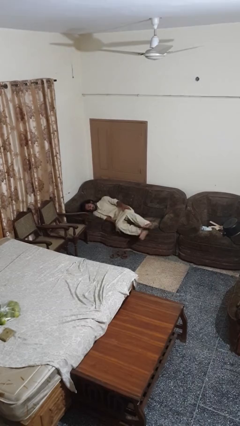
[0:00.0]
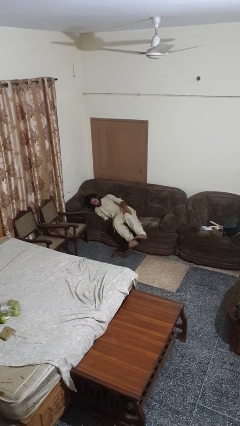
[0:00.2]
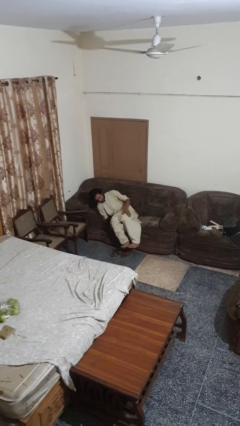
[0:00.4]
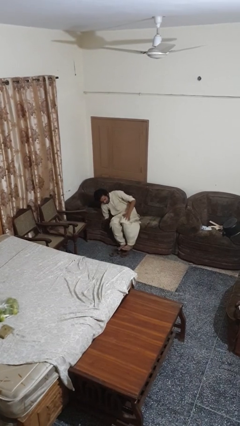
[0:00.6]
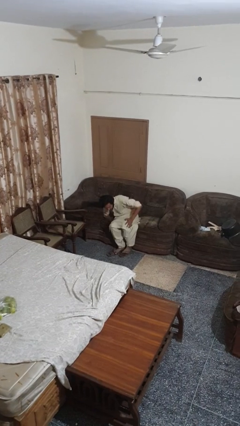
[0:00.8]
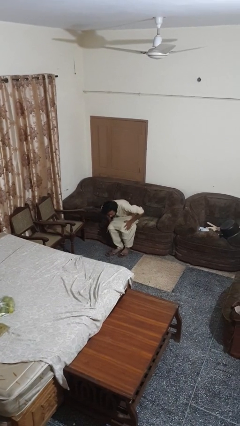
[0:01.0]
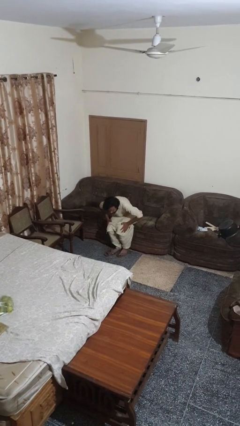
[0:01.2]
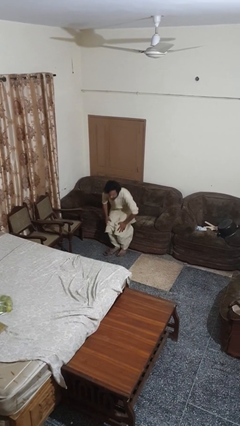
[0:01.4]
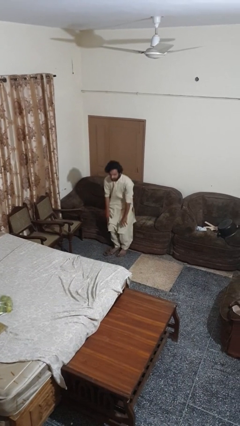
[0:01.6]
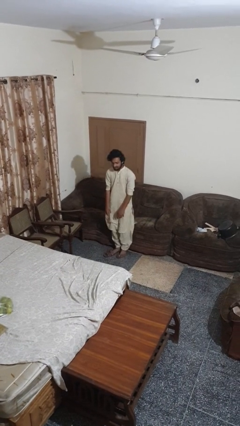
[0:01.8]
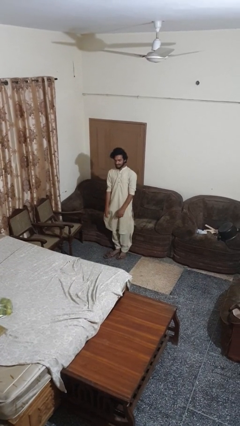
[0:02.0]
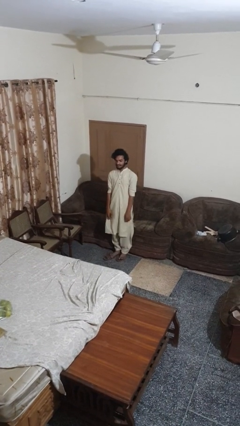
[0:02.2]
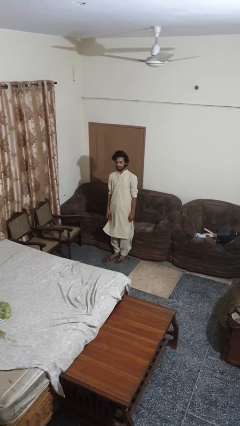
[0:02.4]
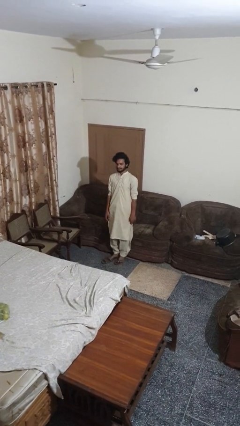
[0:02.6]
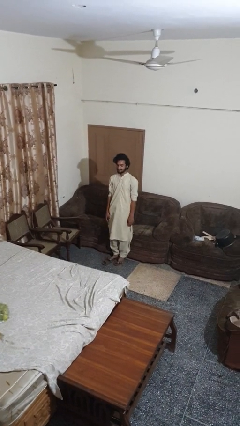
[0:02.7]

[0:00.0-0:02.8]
person stands up

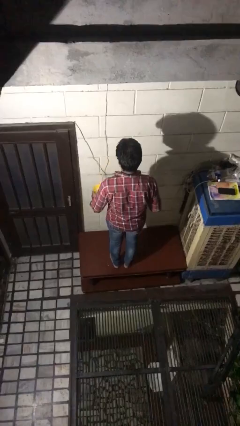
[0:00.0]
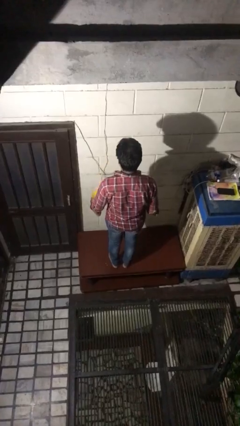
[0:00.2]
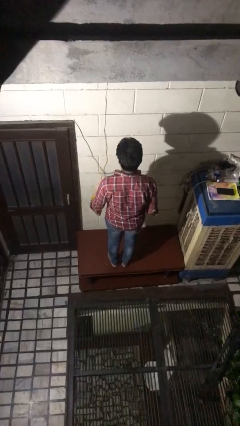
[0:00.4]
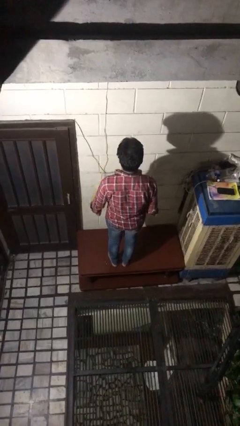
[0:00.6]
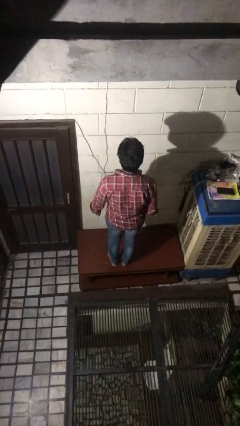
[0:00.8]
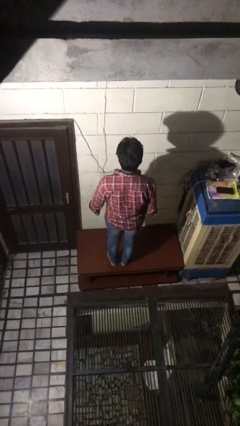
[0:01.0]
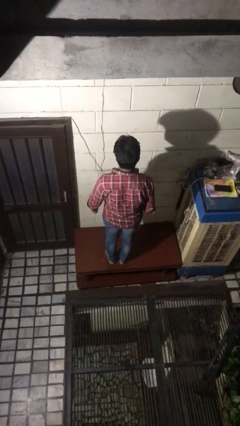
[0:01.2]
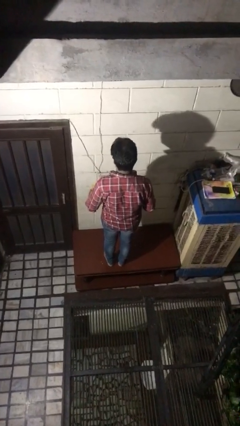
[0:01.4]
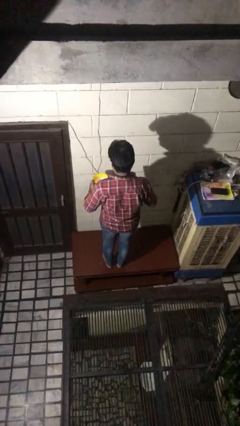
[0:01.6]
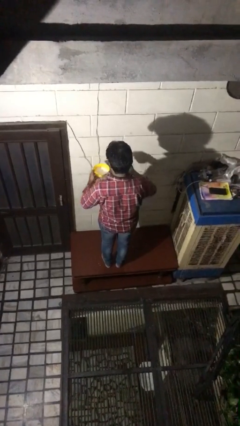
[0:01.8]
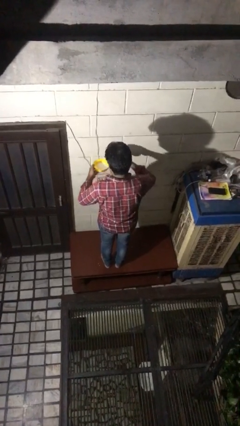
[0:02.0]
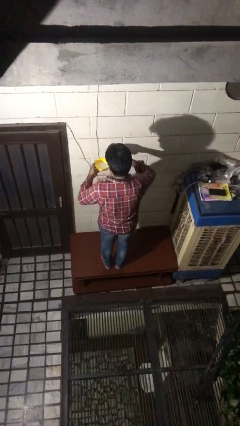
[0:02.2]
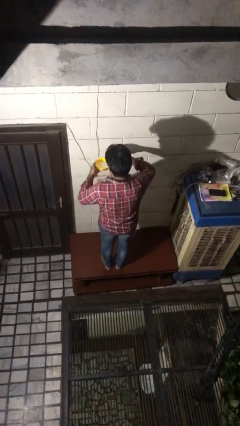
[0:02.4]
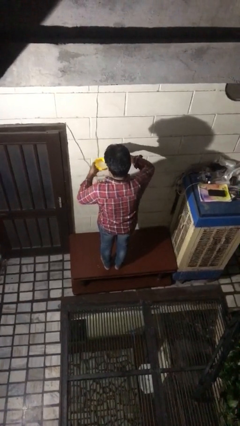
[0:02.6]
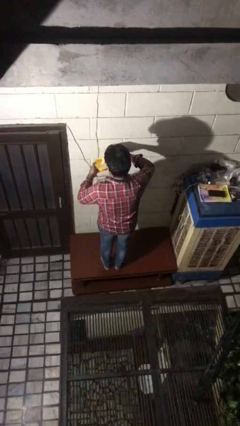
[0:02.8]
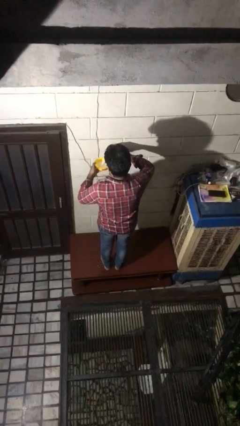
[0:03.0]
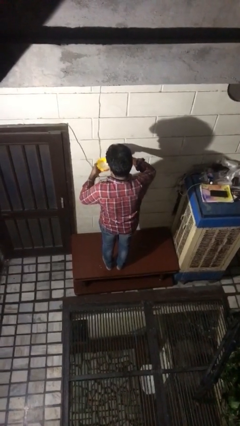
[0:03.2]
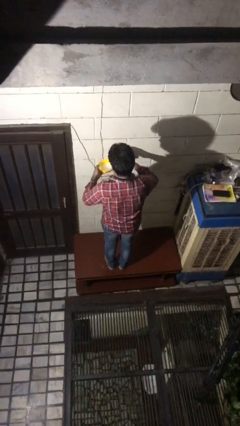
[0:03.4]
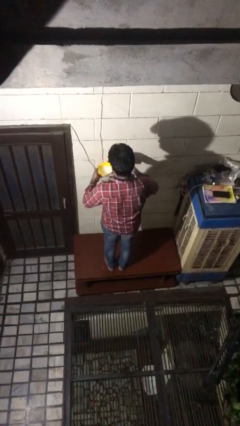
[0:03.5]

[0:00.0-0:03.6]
person pours into bowl

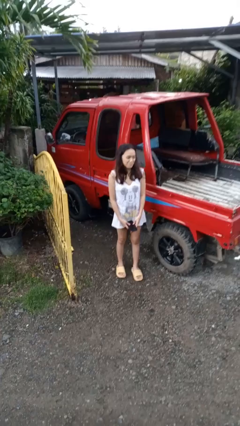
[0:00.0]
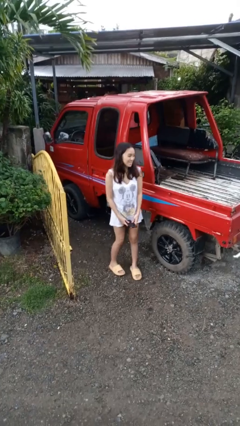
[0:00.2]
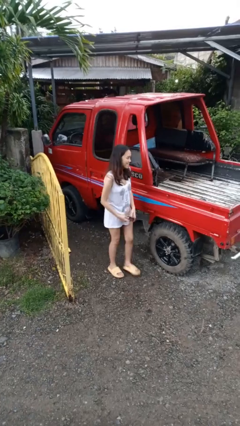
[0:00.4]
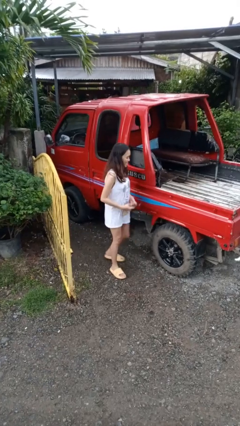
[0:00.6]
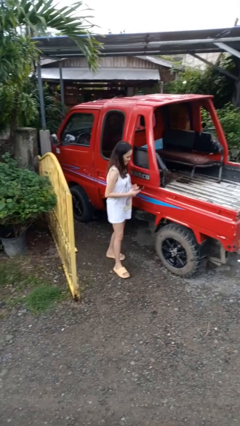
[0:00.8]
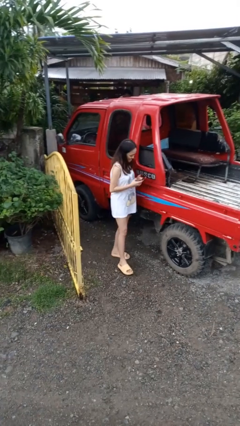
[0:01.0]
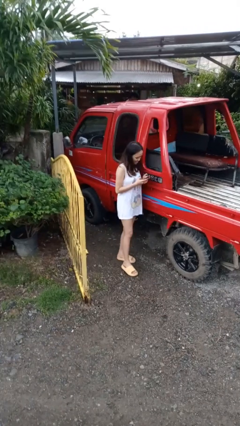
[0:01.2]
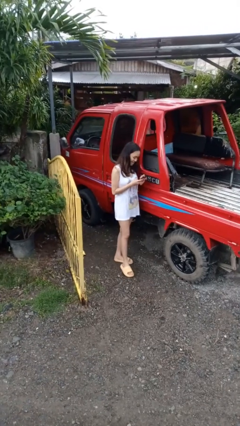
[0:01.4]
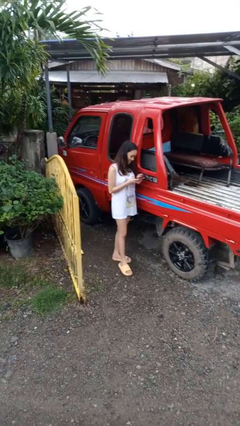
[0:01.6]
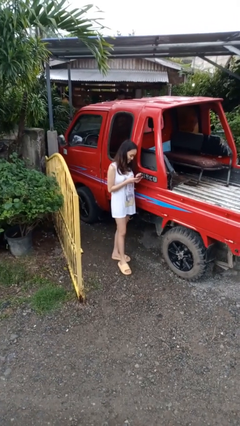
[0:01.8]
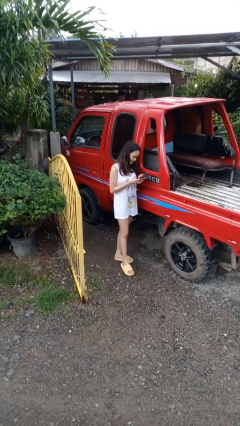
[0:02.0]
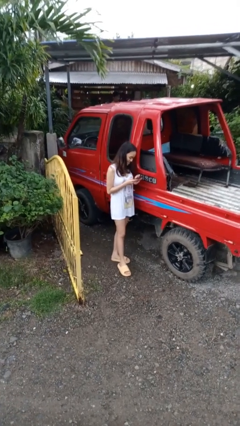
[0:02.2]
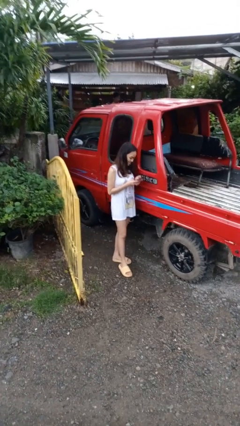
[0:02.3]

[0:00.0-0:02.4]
person leans against car

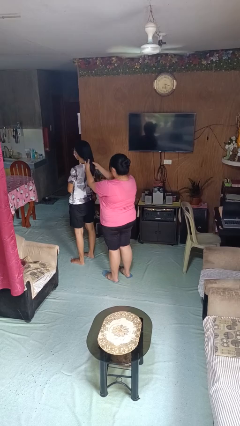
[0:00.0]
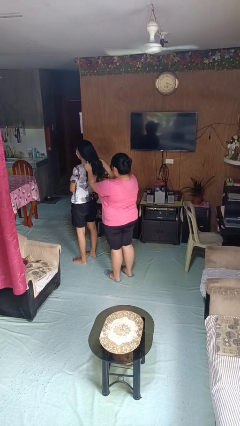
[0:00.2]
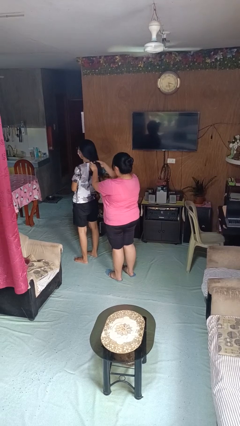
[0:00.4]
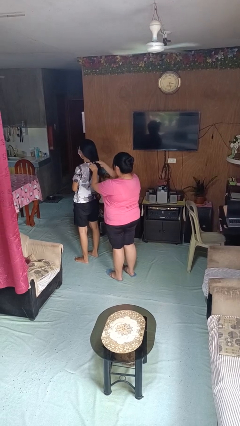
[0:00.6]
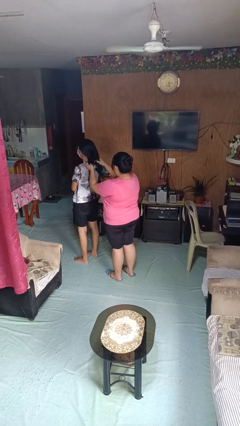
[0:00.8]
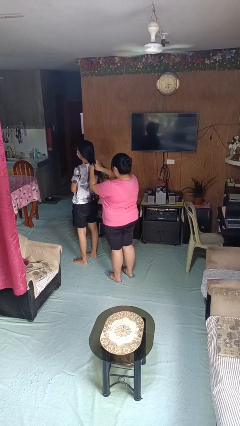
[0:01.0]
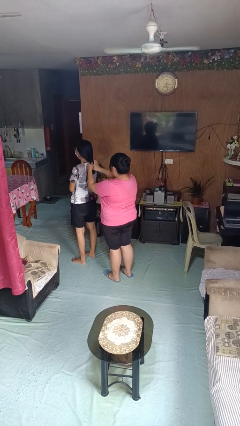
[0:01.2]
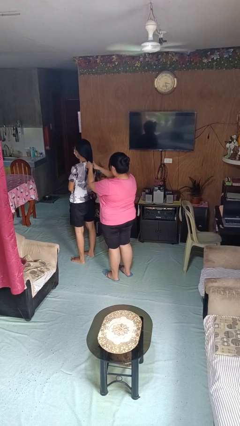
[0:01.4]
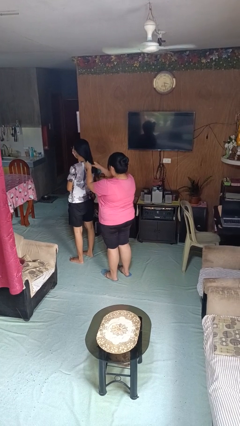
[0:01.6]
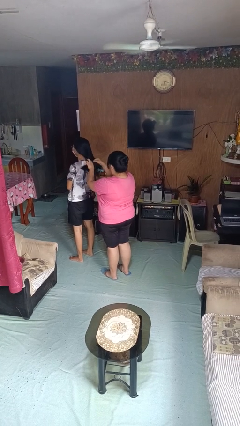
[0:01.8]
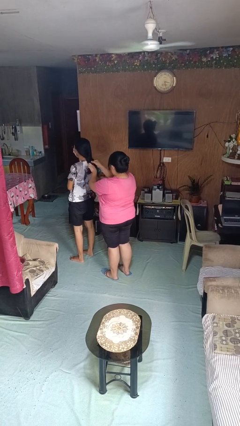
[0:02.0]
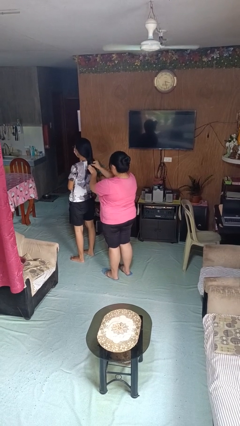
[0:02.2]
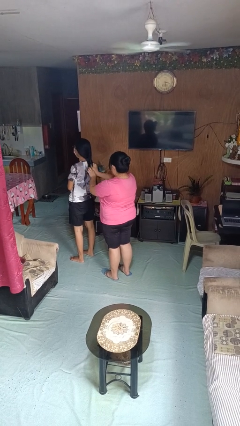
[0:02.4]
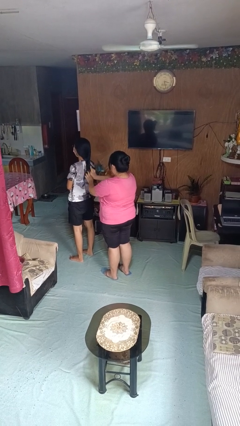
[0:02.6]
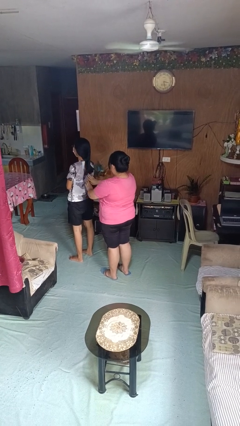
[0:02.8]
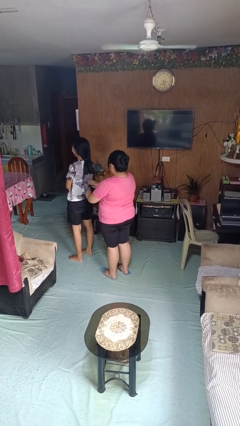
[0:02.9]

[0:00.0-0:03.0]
person braids hair of person

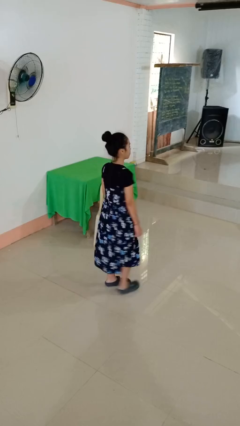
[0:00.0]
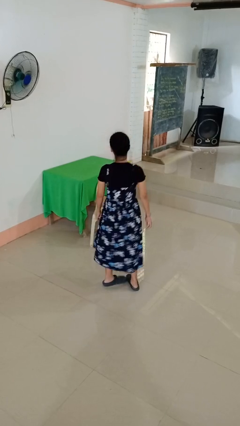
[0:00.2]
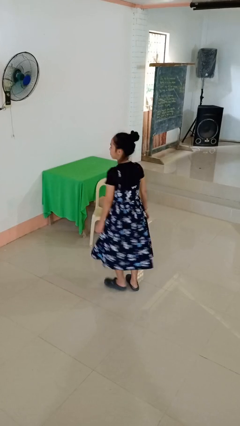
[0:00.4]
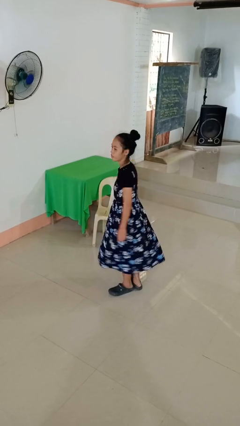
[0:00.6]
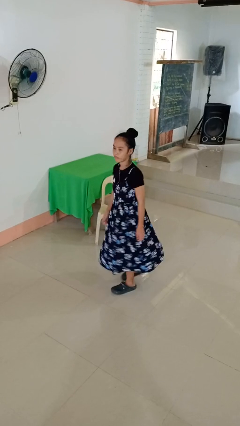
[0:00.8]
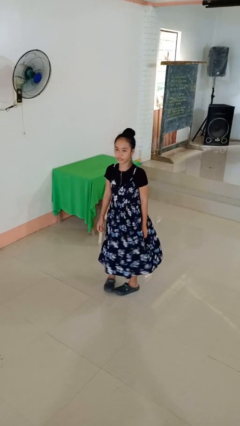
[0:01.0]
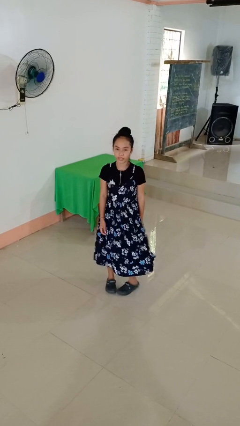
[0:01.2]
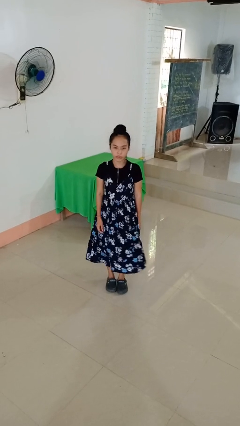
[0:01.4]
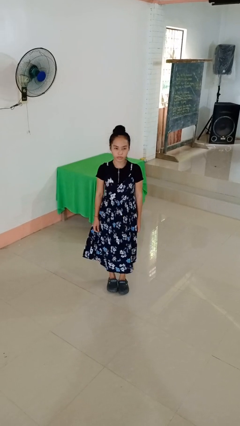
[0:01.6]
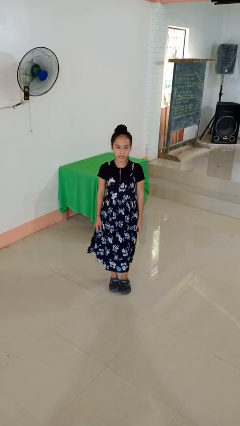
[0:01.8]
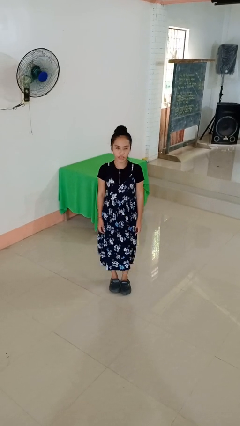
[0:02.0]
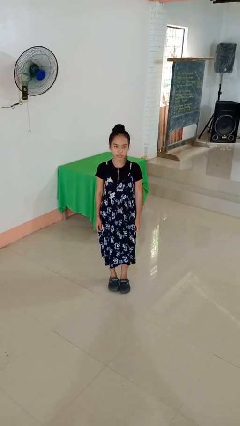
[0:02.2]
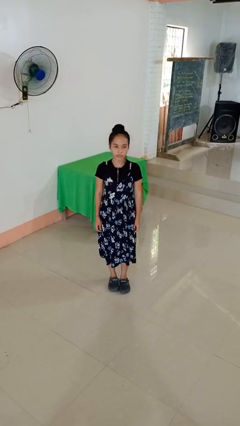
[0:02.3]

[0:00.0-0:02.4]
person twirls

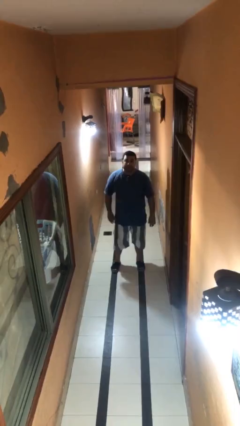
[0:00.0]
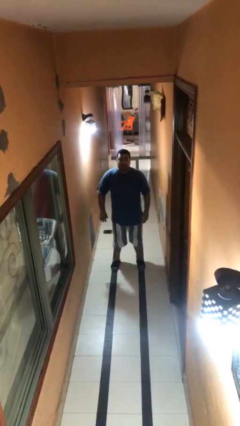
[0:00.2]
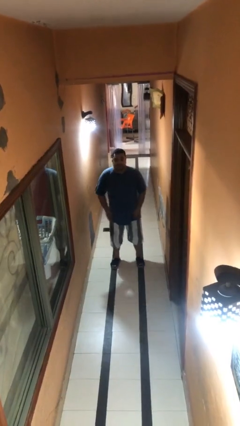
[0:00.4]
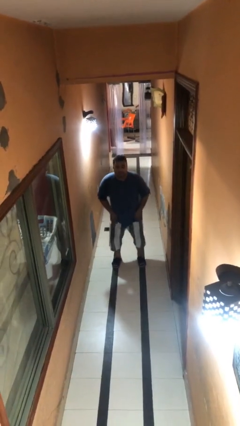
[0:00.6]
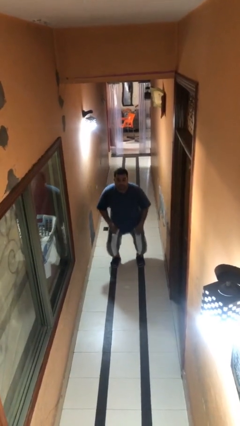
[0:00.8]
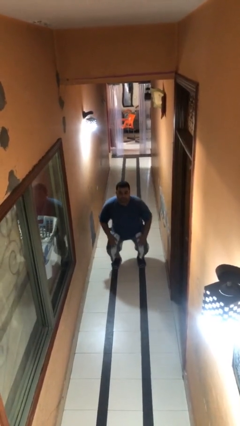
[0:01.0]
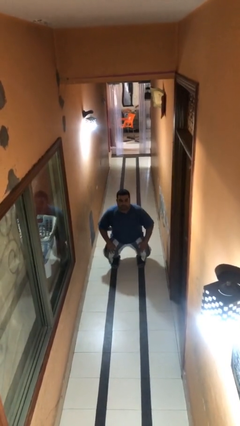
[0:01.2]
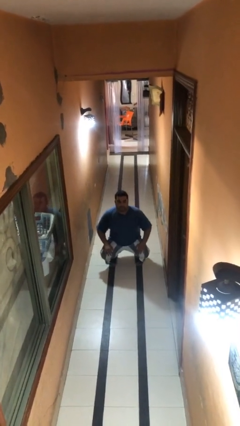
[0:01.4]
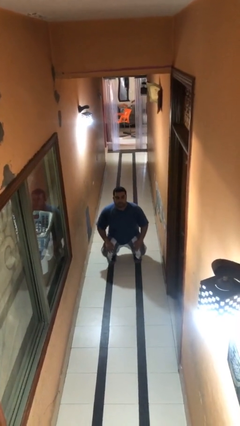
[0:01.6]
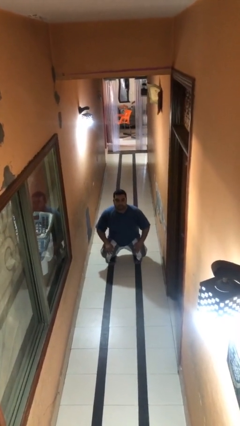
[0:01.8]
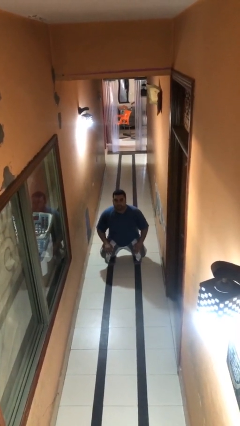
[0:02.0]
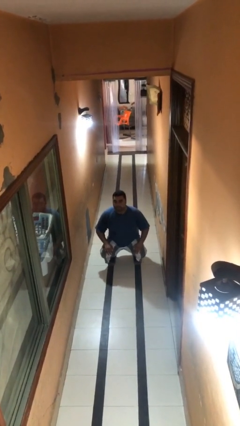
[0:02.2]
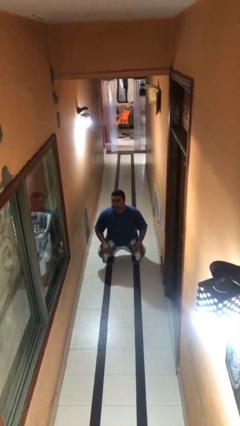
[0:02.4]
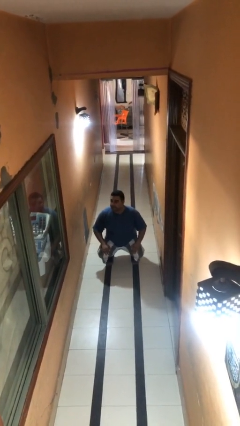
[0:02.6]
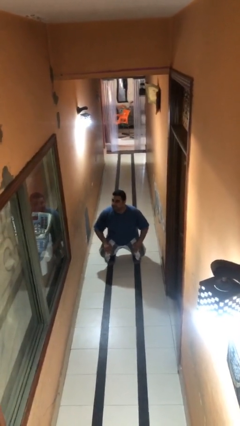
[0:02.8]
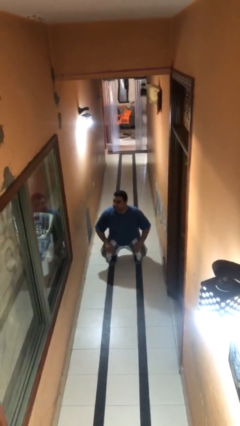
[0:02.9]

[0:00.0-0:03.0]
person squats

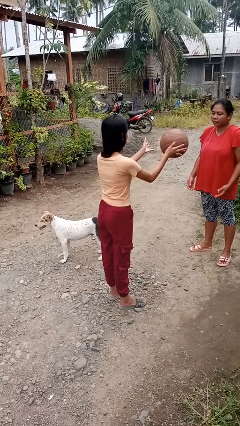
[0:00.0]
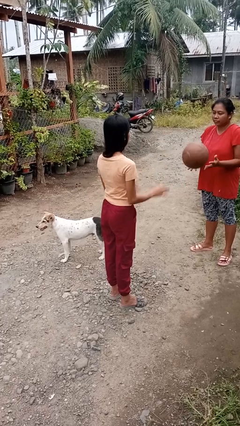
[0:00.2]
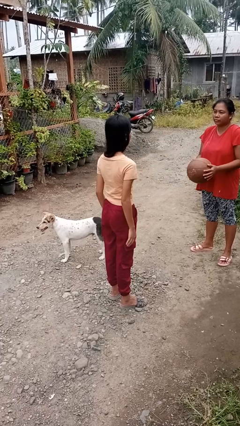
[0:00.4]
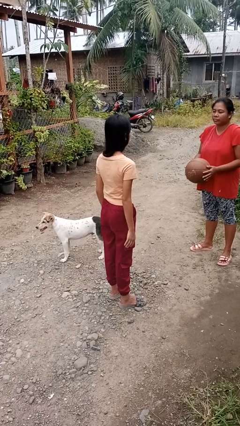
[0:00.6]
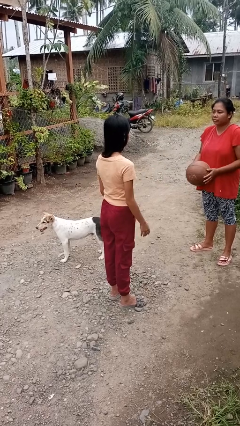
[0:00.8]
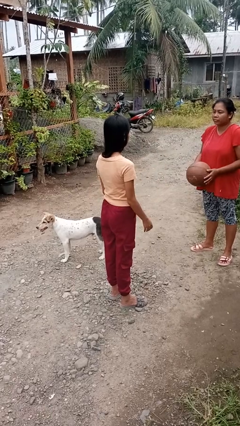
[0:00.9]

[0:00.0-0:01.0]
person throws object to person
